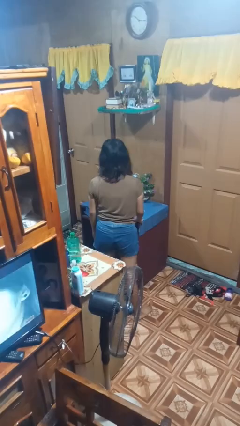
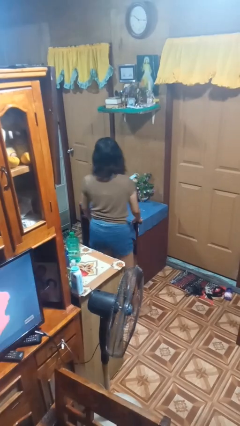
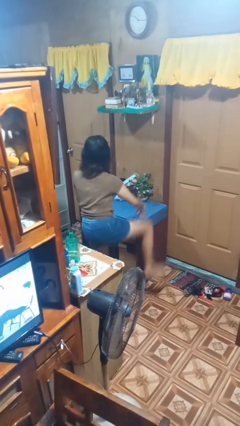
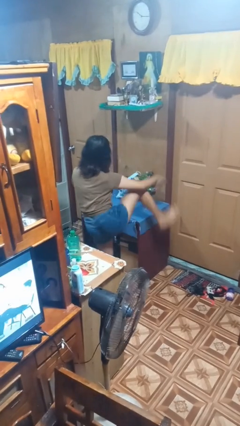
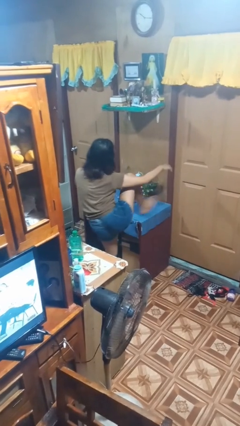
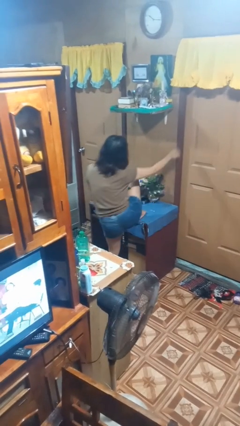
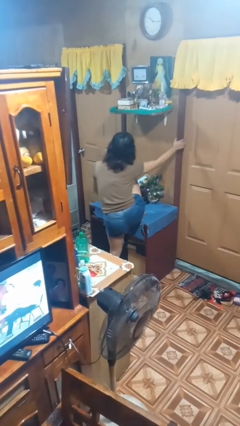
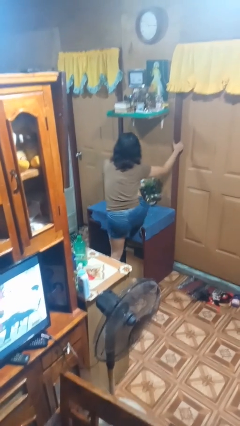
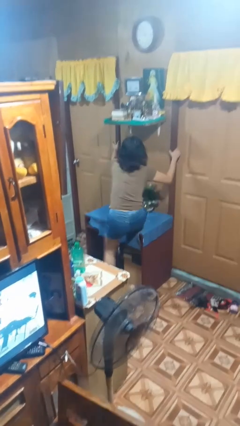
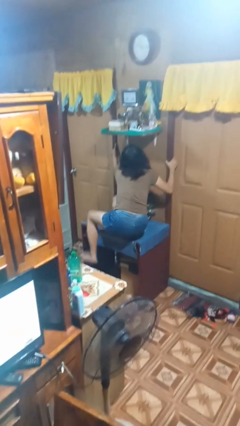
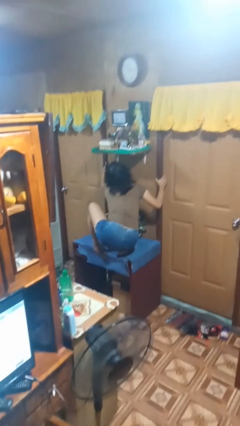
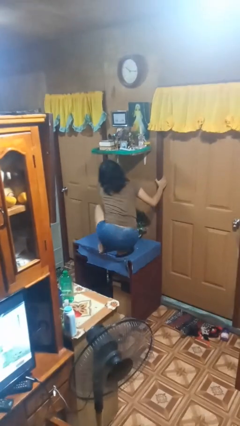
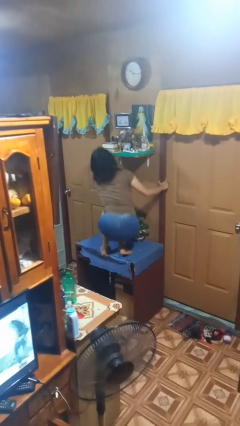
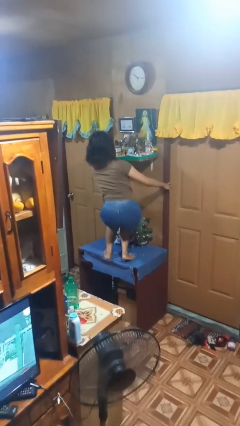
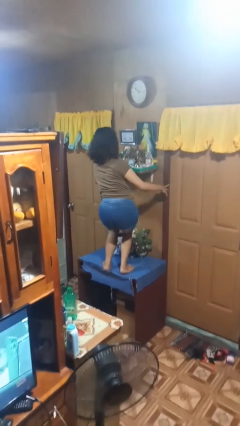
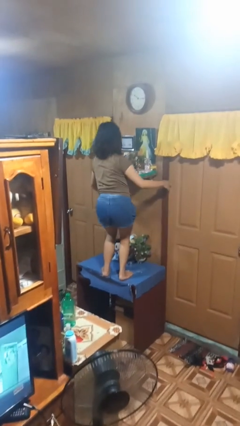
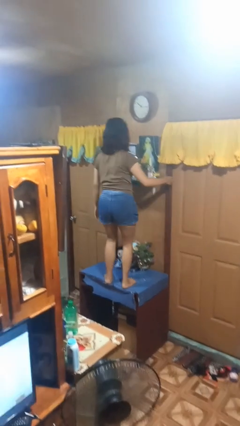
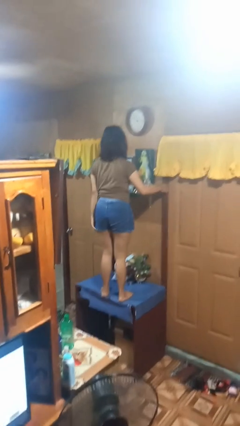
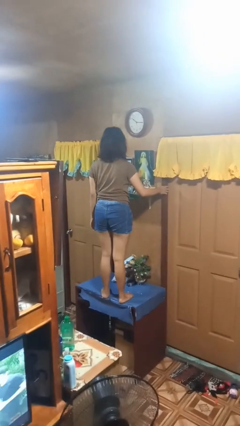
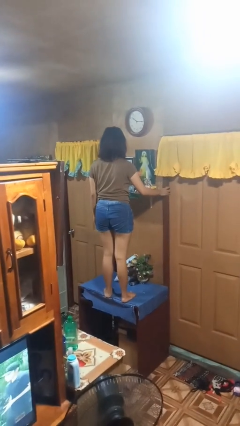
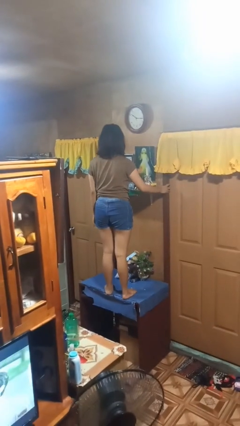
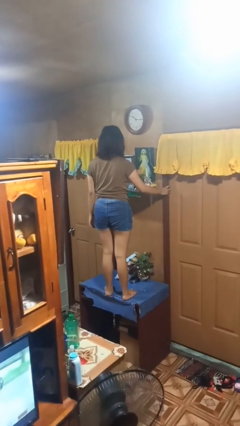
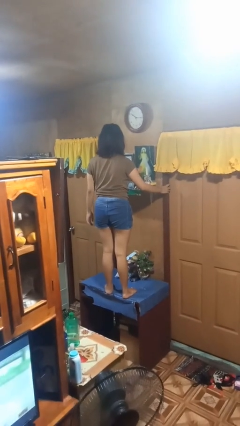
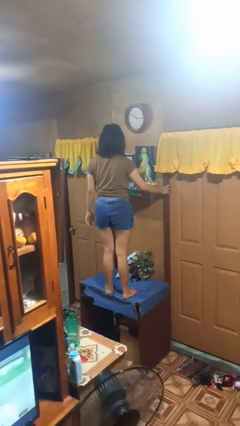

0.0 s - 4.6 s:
person climbs on table

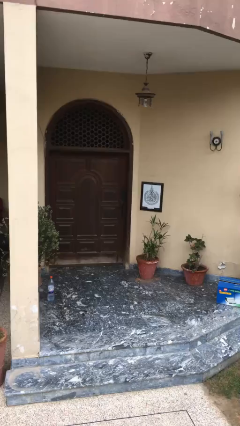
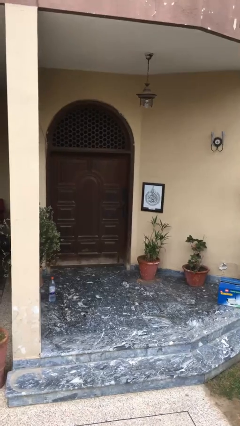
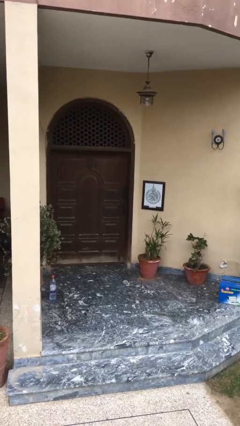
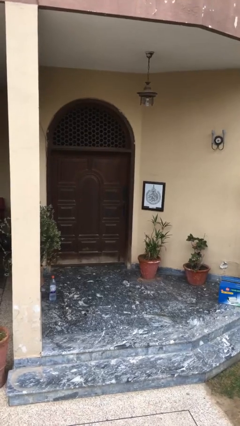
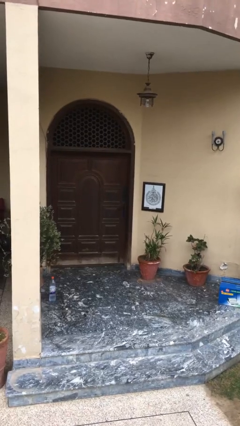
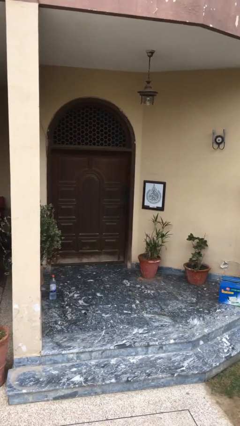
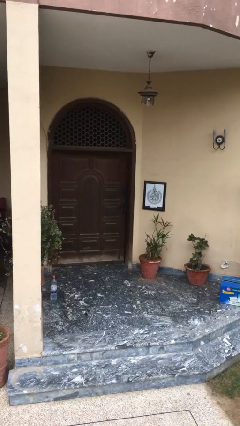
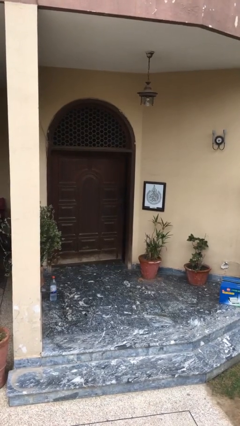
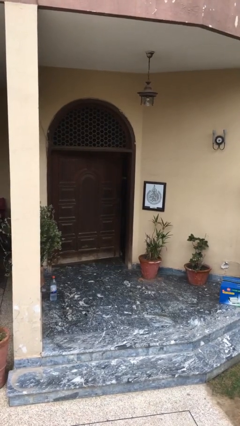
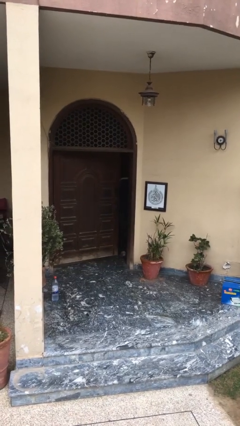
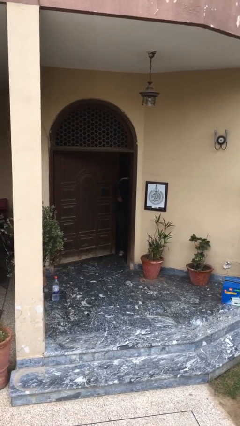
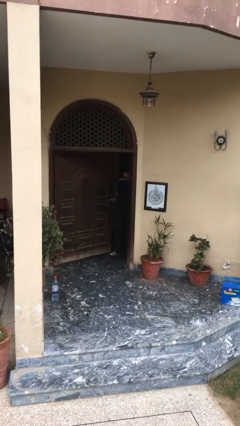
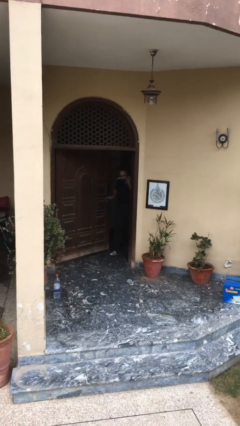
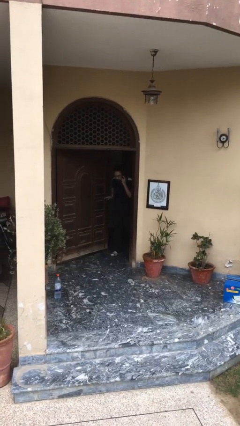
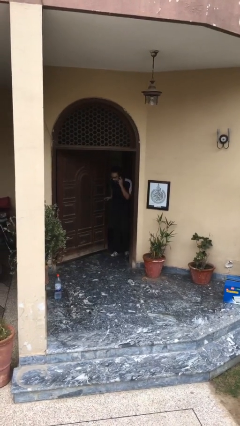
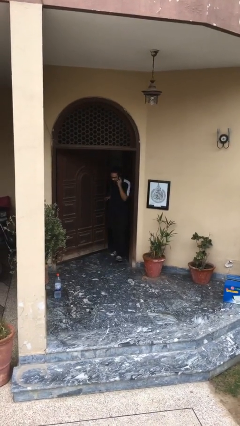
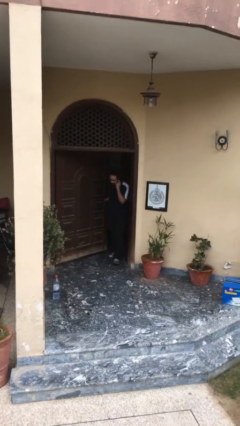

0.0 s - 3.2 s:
person opens facility door

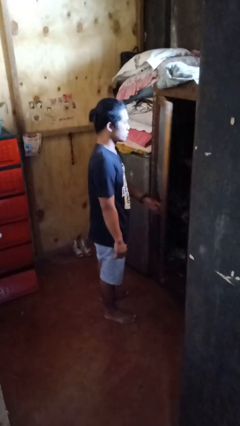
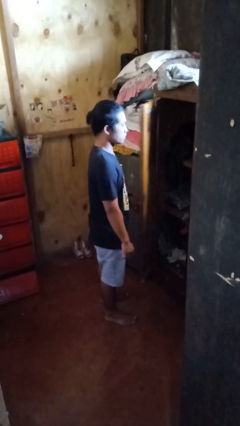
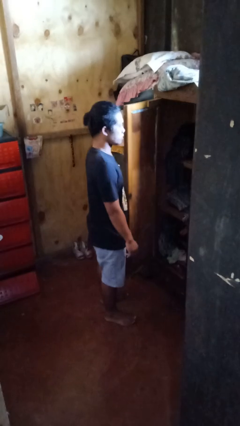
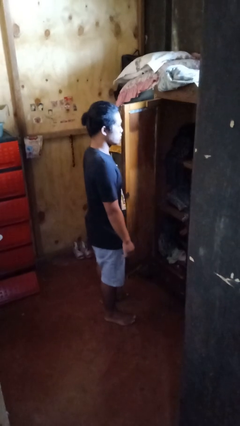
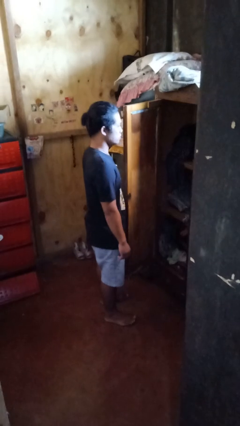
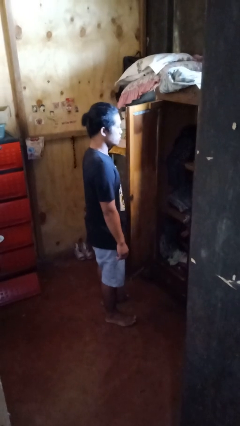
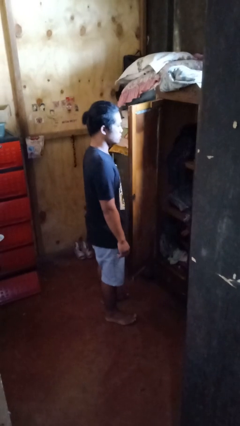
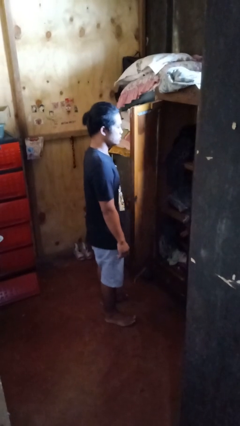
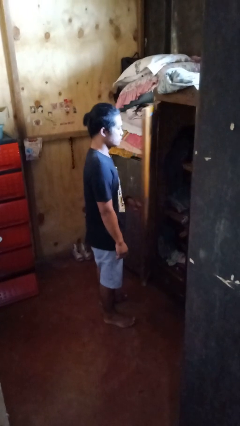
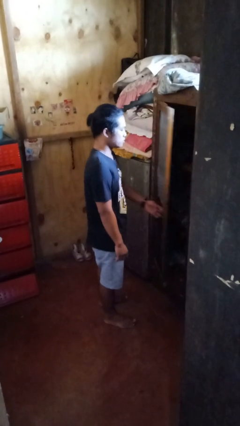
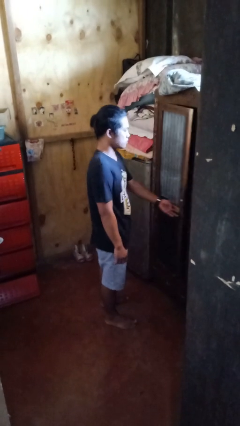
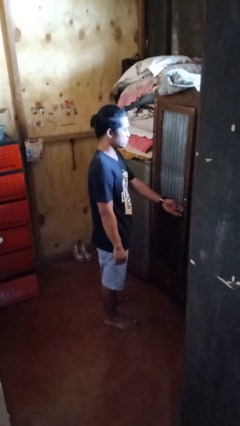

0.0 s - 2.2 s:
person opens closet door

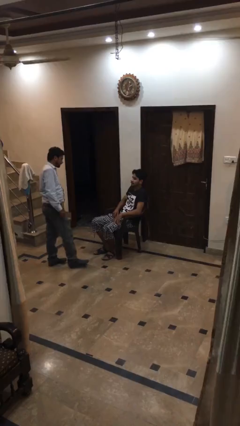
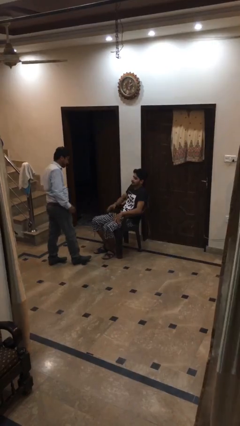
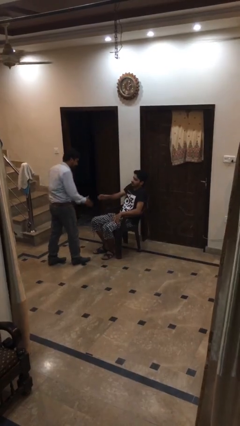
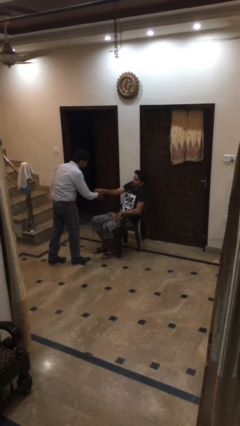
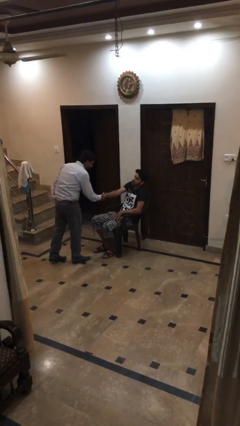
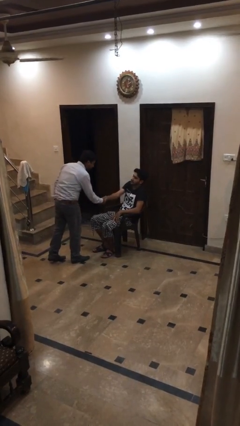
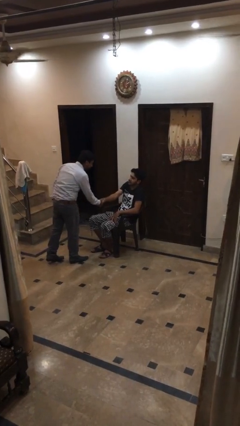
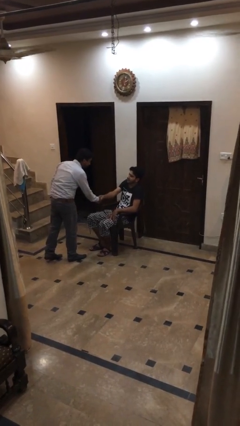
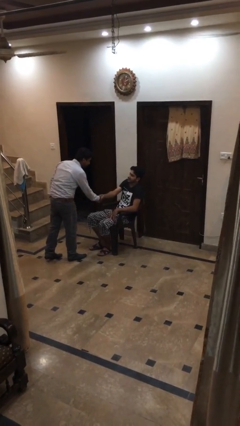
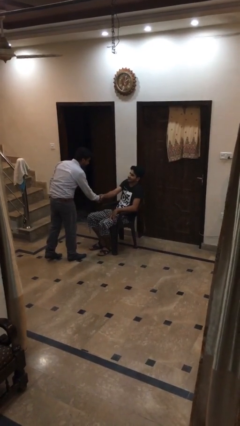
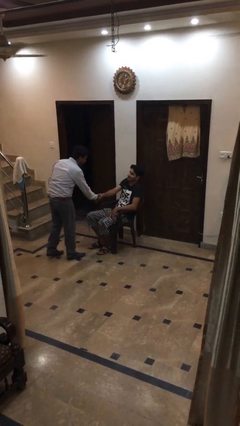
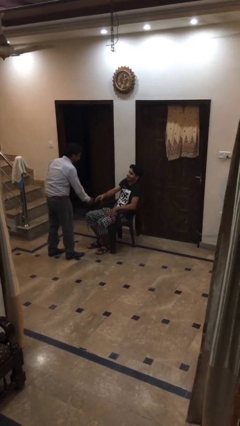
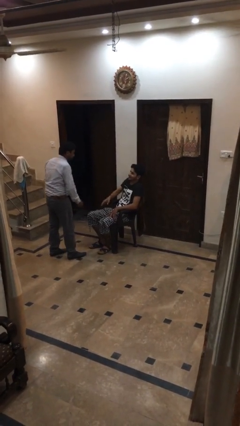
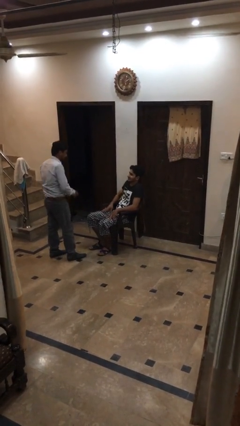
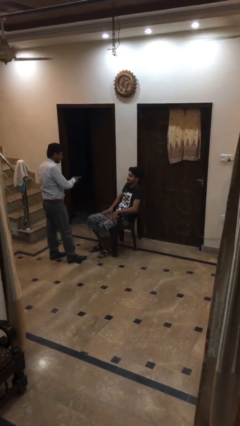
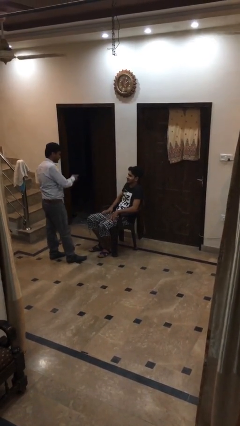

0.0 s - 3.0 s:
person shakes hand

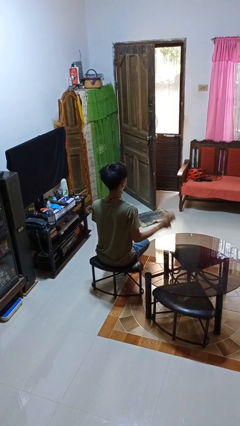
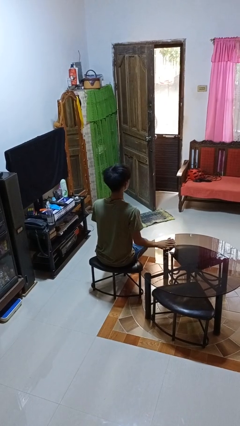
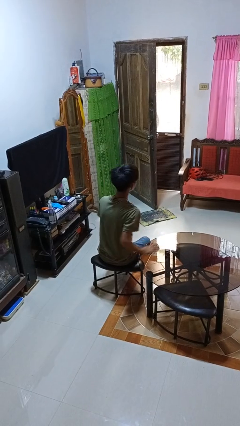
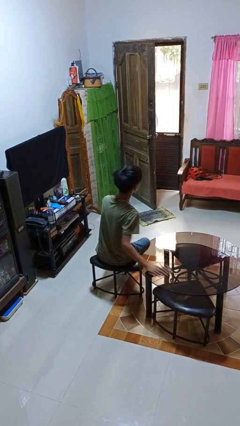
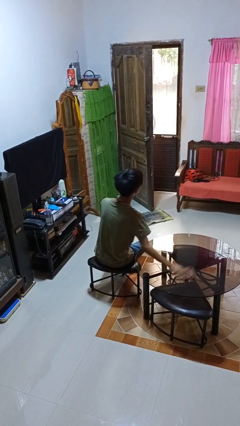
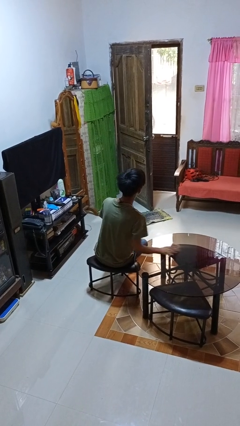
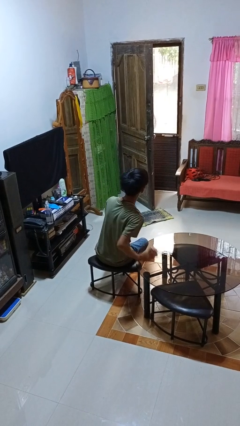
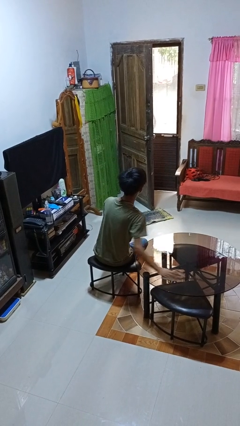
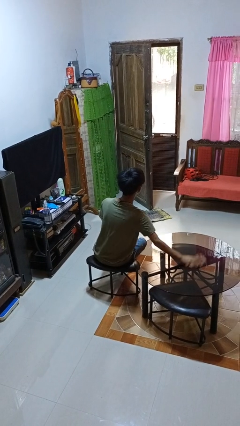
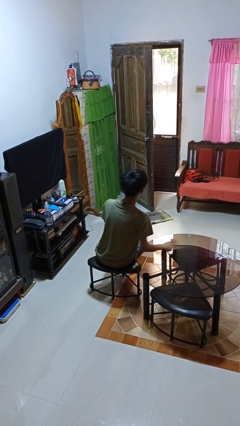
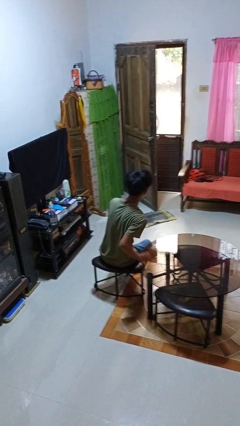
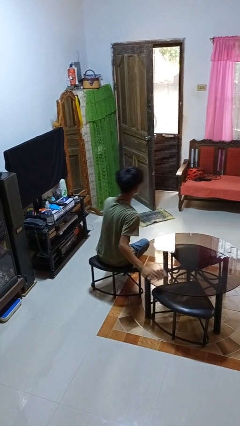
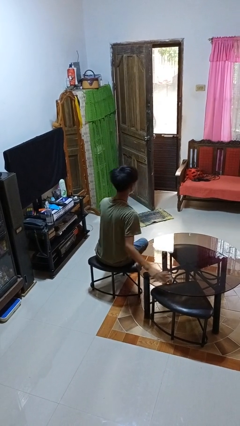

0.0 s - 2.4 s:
person cleans table with rag

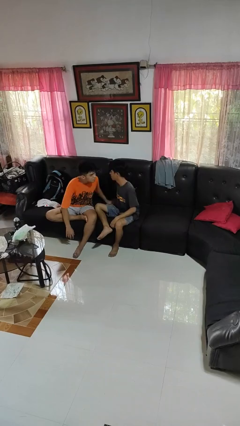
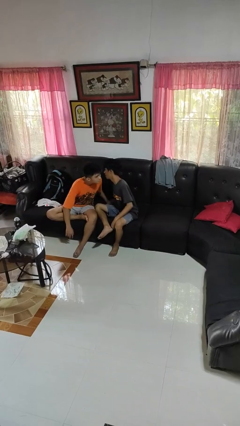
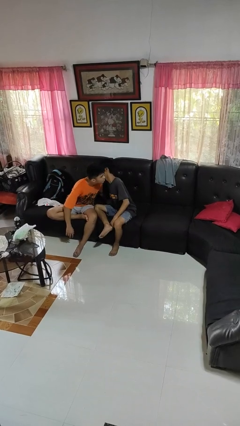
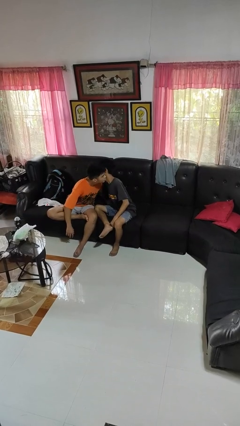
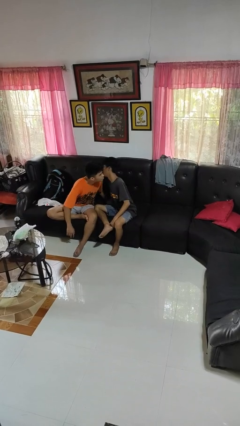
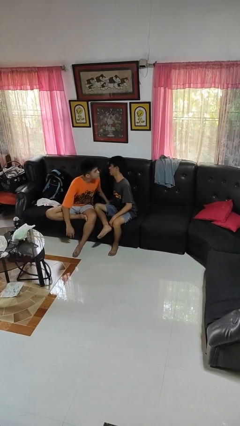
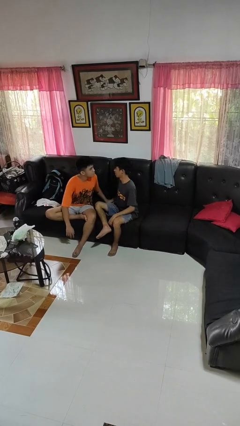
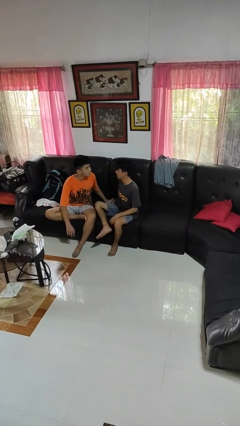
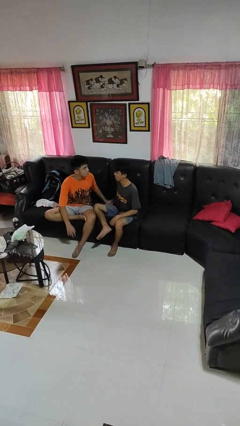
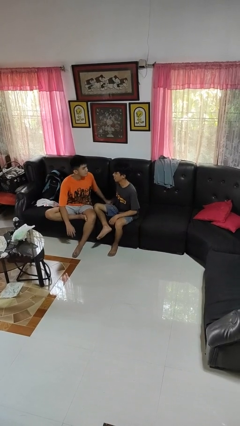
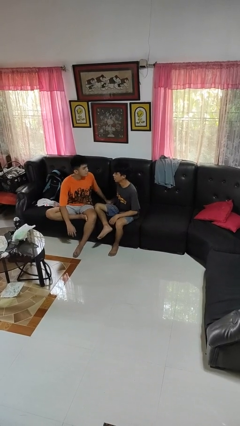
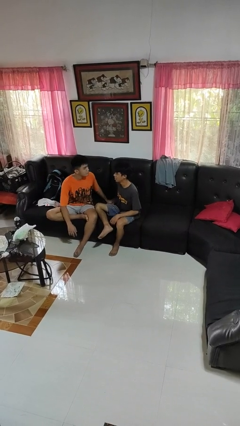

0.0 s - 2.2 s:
person kisses cheek of person
